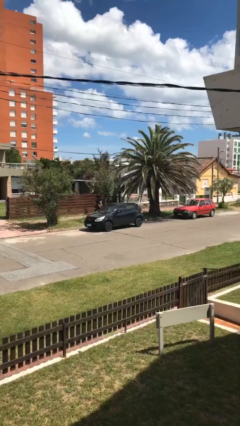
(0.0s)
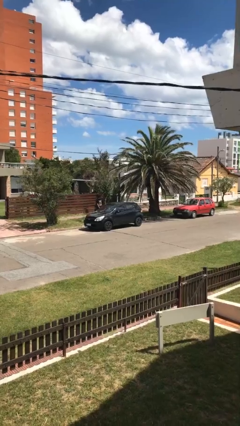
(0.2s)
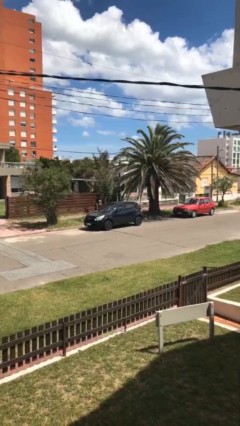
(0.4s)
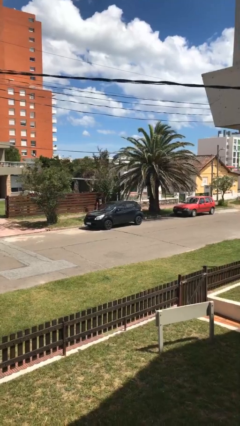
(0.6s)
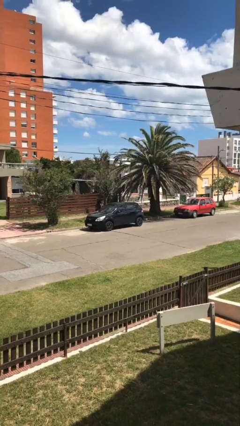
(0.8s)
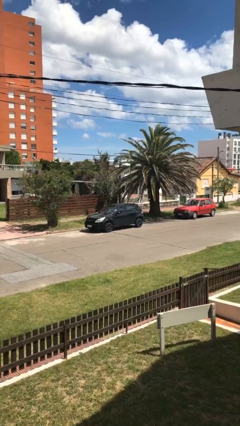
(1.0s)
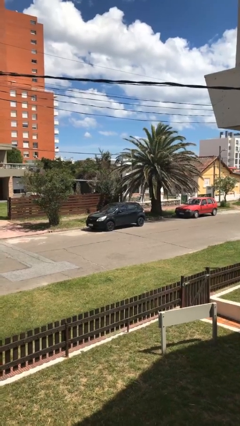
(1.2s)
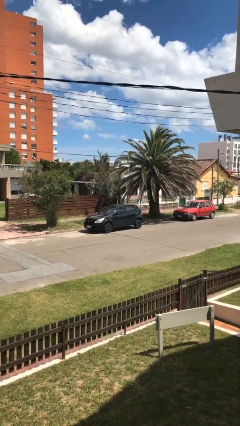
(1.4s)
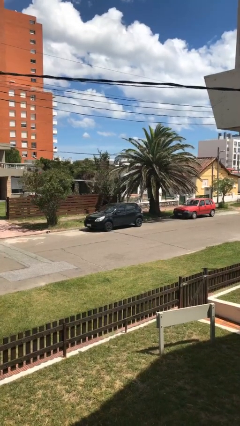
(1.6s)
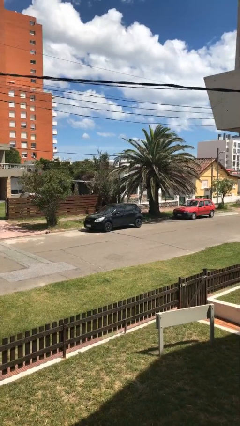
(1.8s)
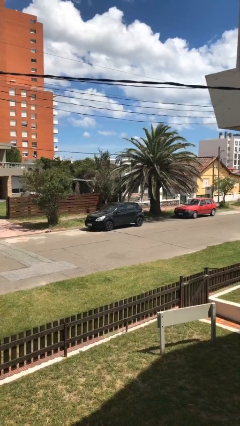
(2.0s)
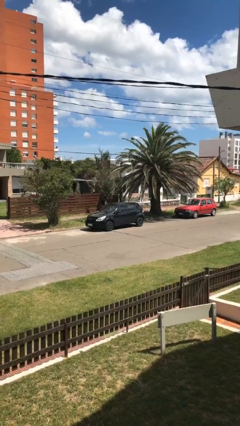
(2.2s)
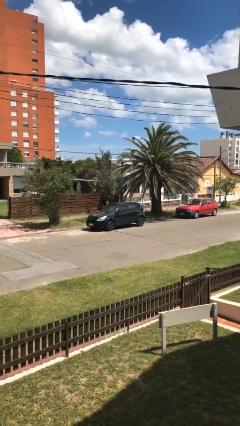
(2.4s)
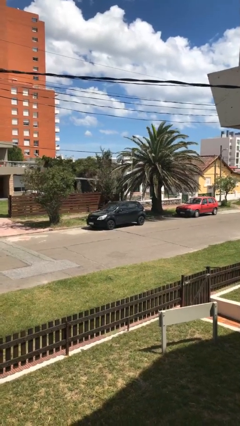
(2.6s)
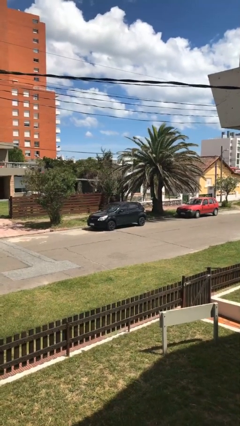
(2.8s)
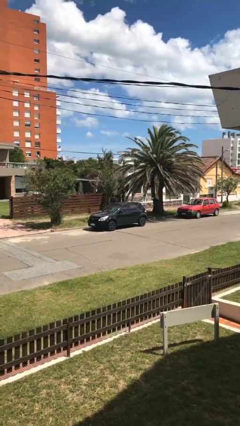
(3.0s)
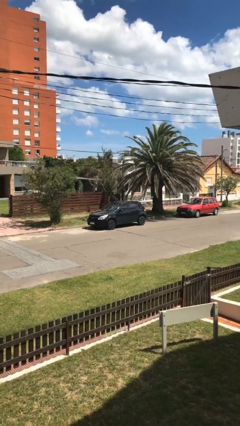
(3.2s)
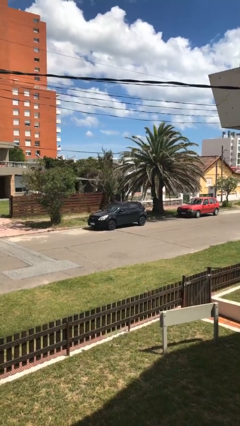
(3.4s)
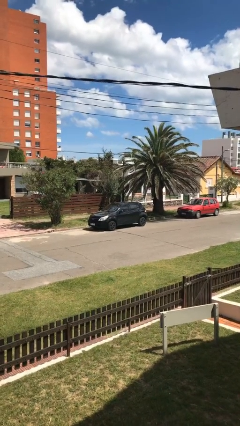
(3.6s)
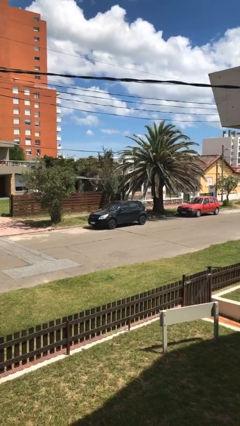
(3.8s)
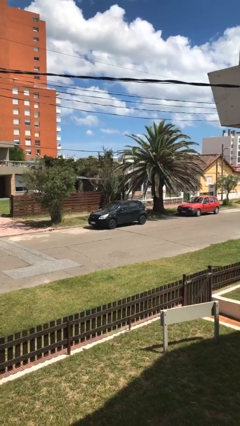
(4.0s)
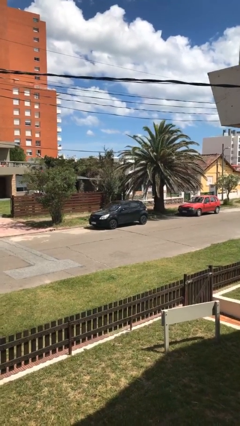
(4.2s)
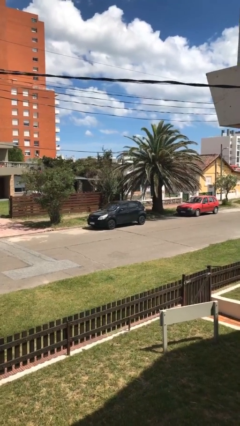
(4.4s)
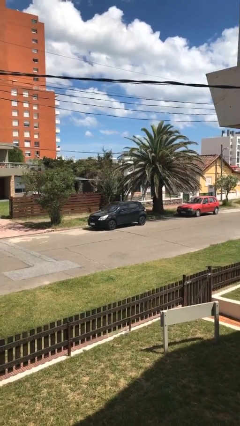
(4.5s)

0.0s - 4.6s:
car picks up person

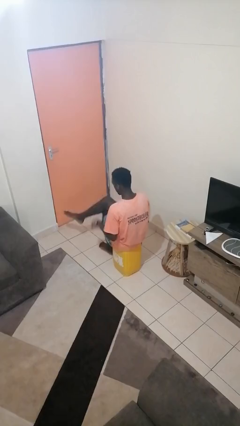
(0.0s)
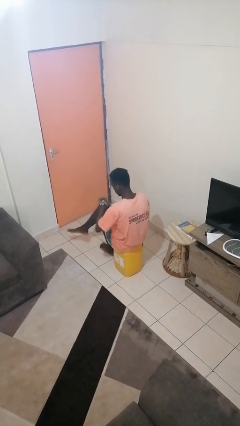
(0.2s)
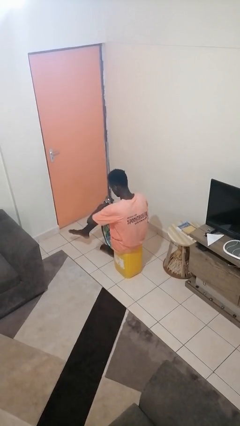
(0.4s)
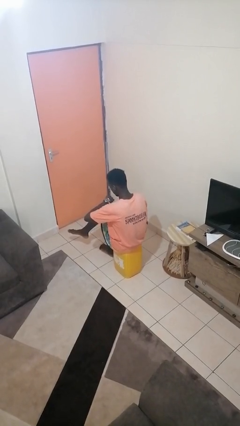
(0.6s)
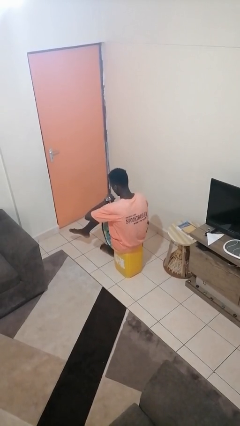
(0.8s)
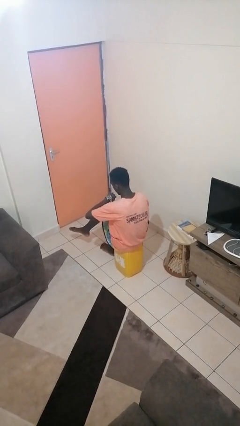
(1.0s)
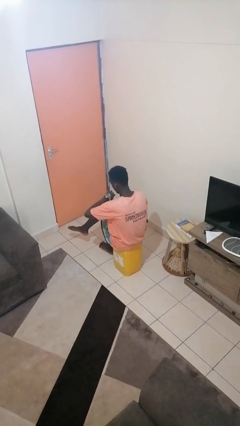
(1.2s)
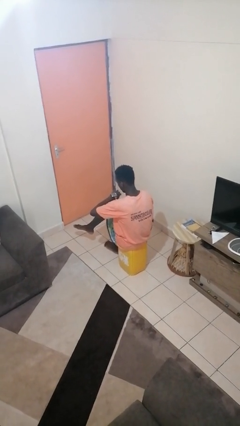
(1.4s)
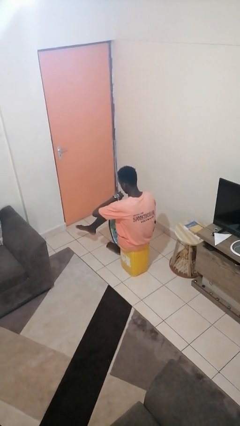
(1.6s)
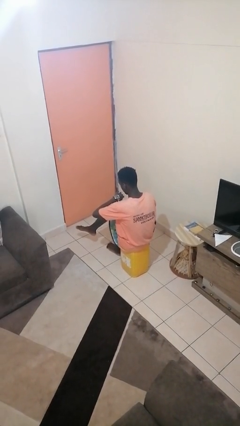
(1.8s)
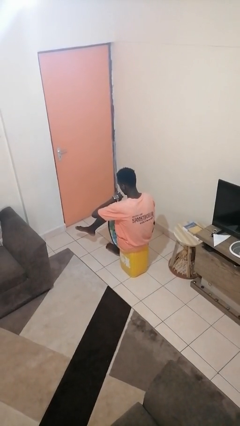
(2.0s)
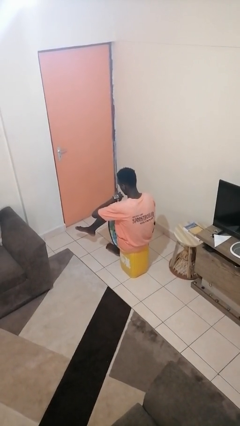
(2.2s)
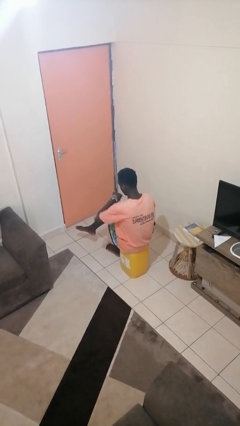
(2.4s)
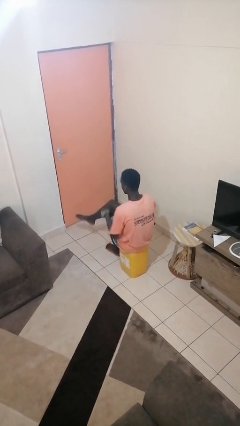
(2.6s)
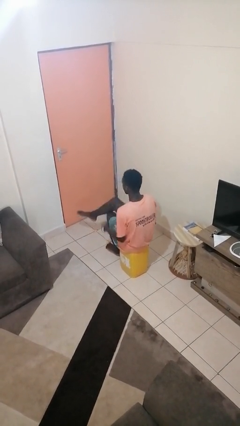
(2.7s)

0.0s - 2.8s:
person looks at wristwatch

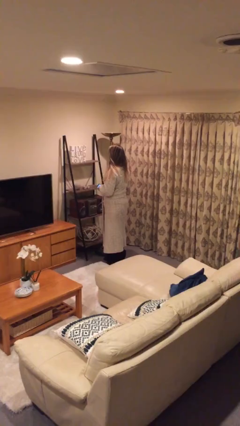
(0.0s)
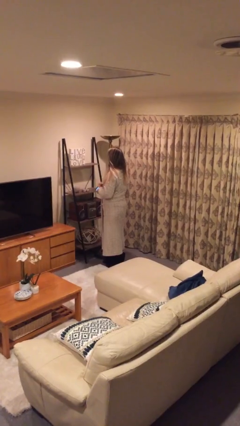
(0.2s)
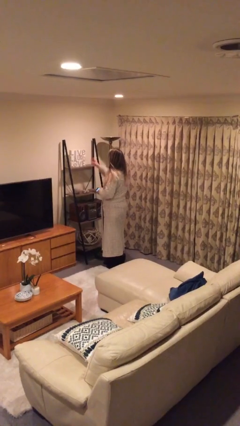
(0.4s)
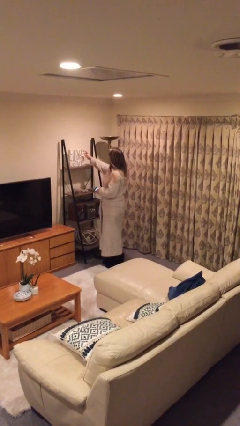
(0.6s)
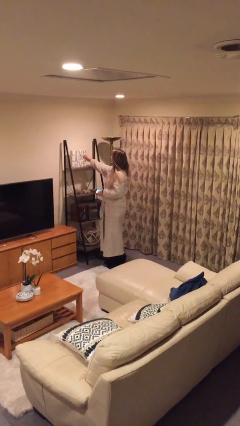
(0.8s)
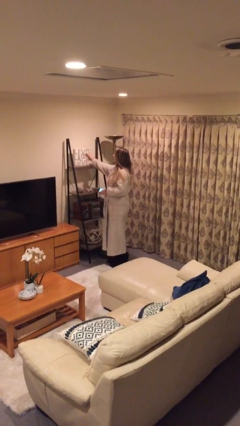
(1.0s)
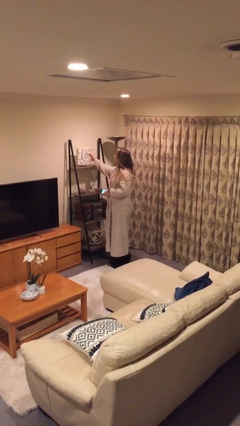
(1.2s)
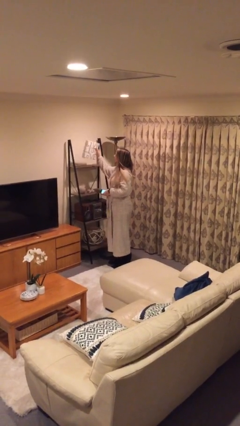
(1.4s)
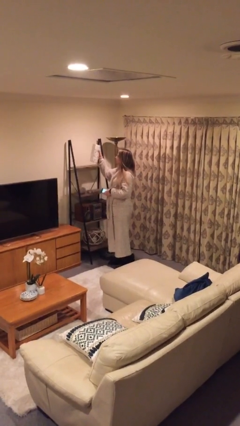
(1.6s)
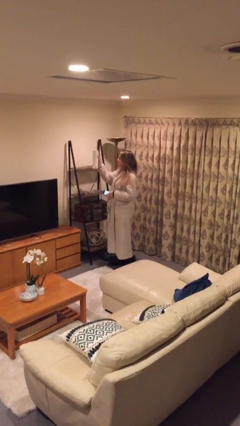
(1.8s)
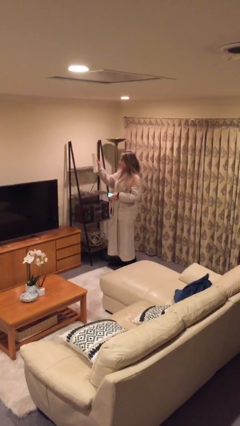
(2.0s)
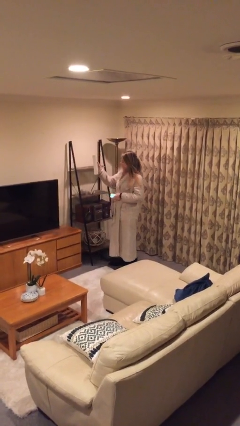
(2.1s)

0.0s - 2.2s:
person picks up object from shelf

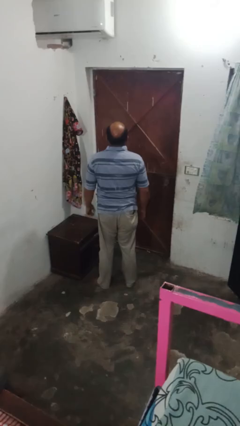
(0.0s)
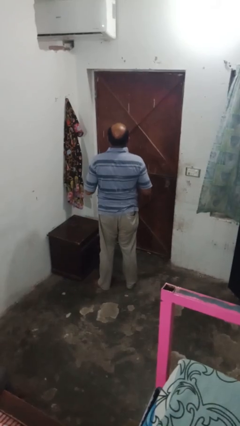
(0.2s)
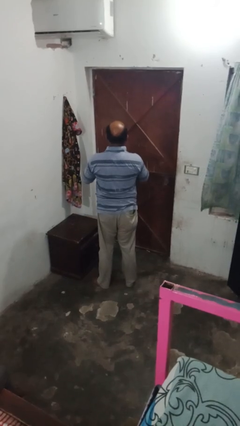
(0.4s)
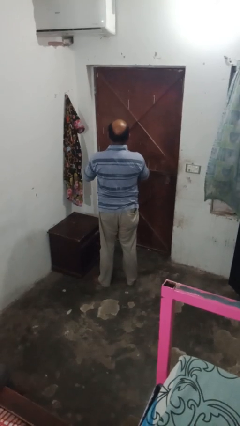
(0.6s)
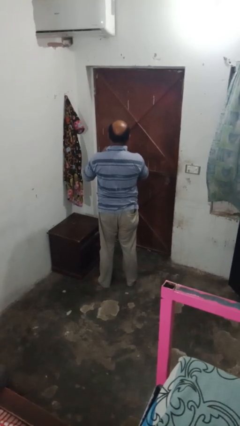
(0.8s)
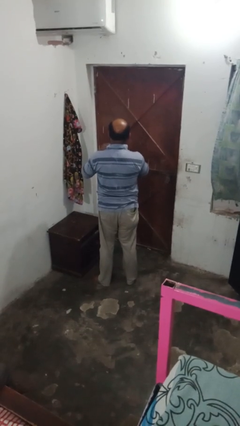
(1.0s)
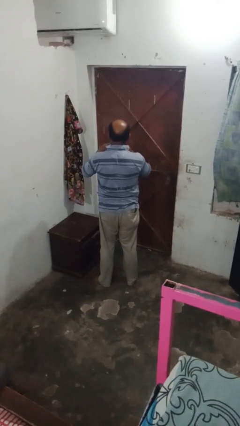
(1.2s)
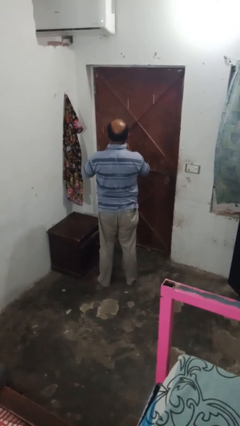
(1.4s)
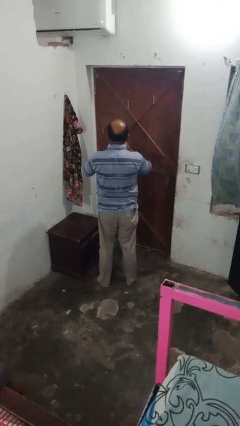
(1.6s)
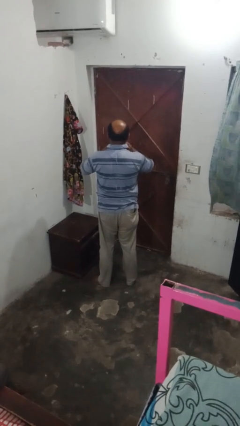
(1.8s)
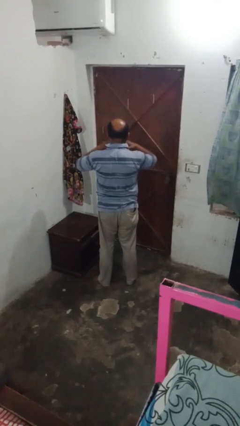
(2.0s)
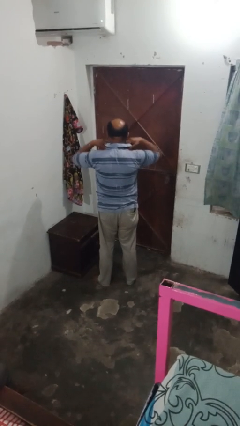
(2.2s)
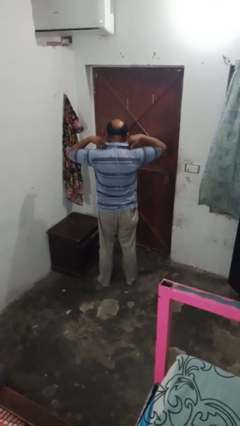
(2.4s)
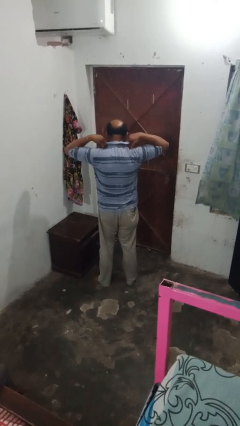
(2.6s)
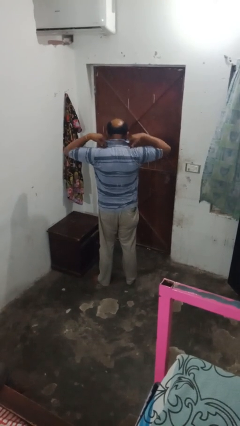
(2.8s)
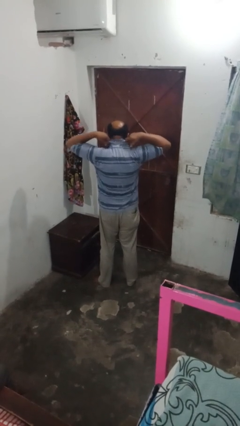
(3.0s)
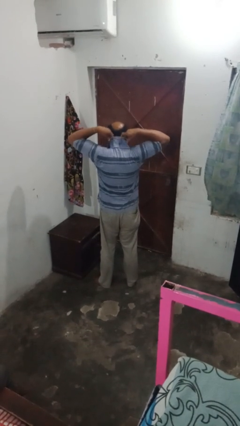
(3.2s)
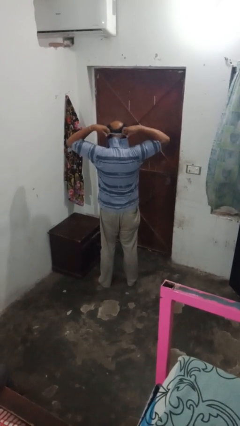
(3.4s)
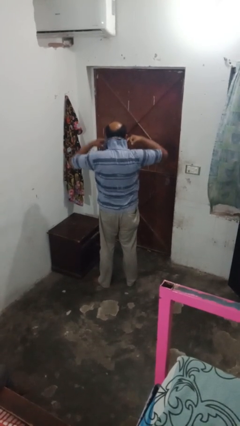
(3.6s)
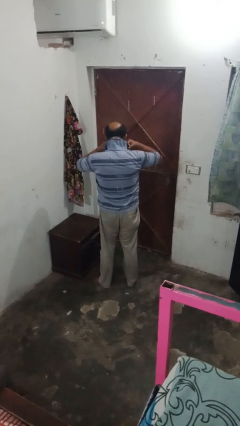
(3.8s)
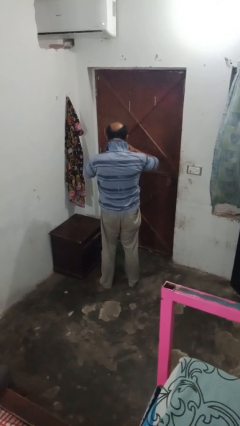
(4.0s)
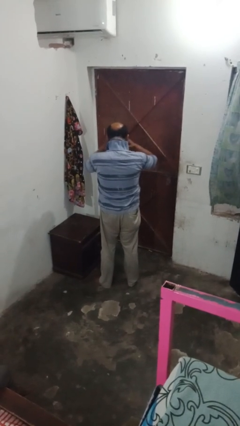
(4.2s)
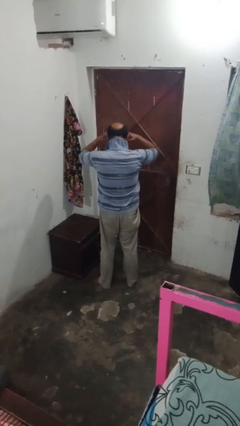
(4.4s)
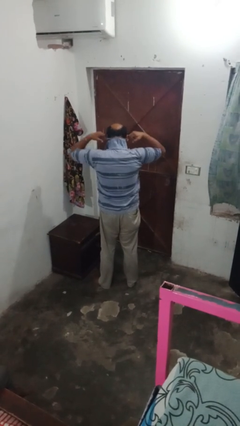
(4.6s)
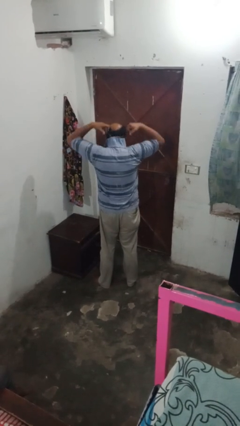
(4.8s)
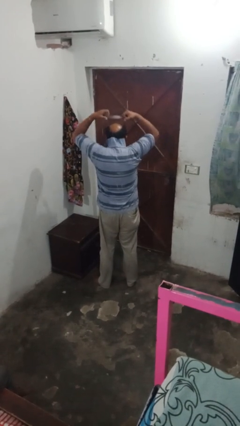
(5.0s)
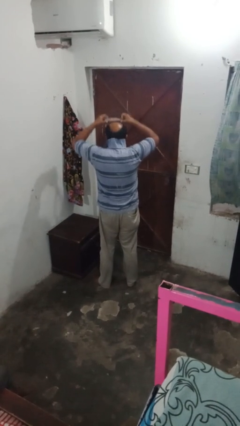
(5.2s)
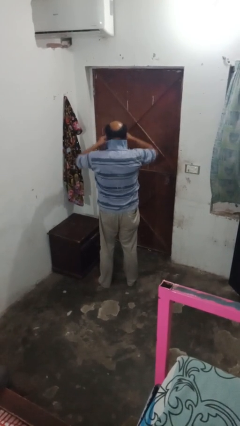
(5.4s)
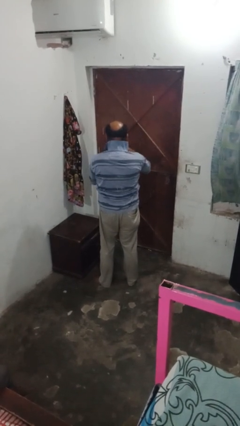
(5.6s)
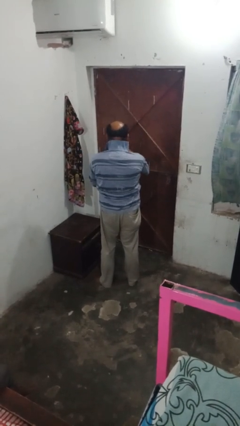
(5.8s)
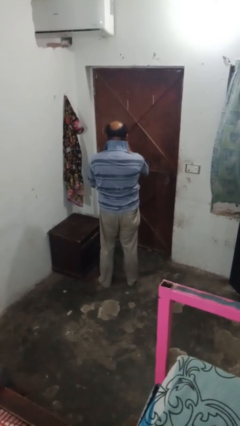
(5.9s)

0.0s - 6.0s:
person takes off necktie

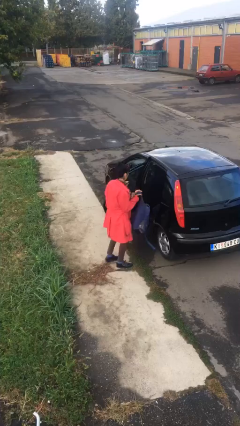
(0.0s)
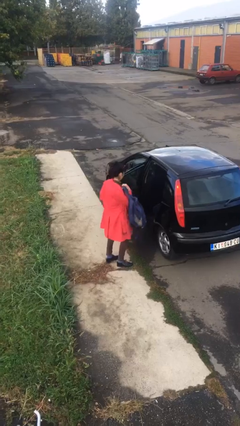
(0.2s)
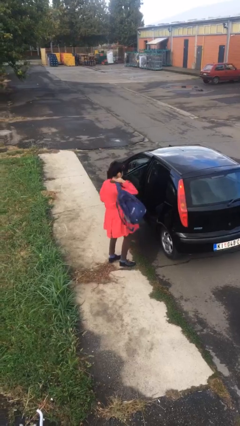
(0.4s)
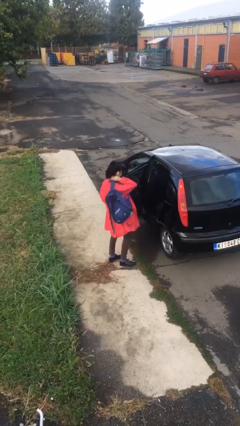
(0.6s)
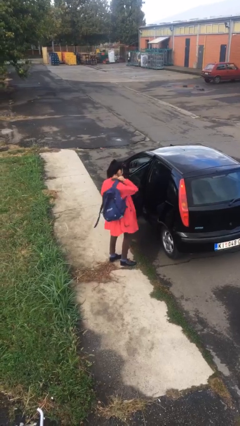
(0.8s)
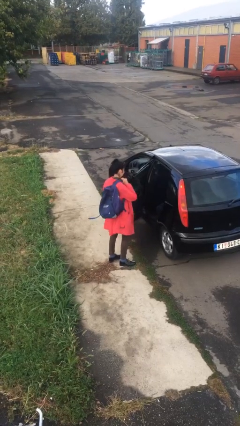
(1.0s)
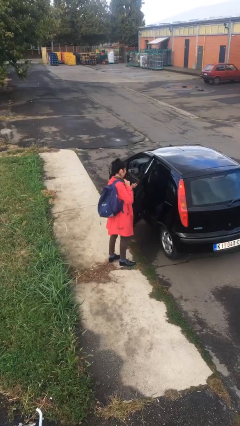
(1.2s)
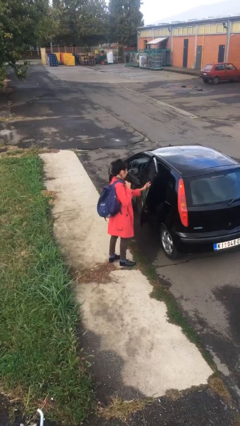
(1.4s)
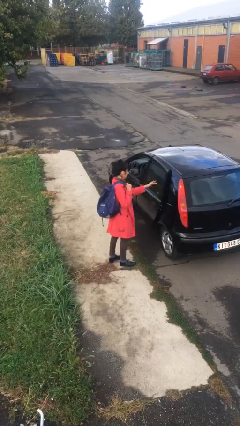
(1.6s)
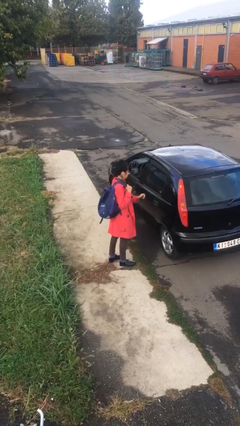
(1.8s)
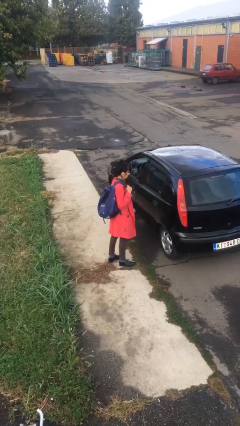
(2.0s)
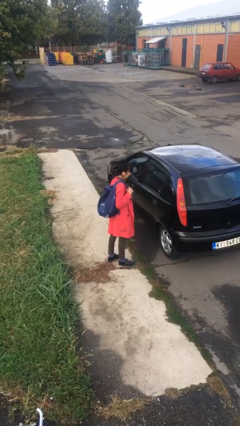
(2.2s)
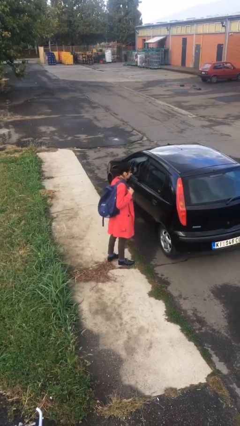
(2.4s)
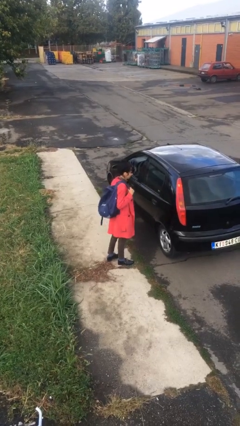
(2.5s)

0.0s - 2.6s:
person closes car door
